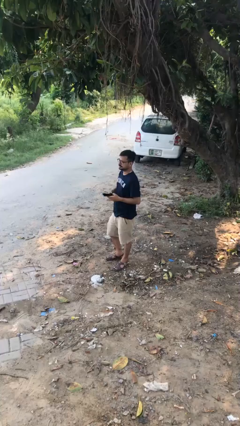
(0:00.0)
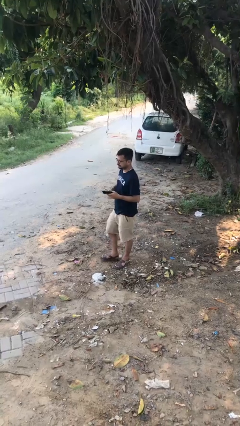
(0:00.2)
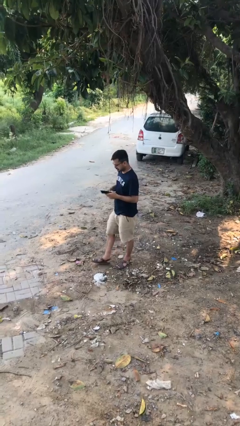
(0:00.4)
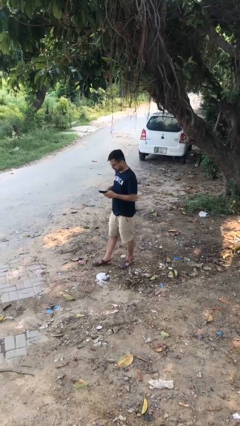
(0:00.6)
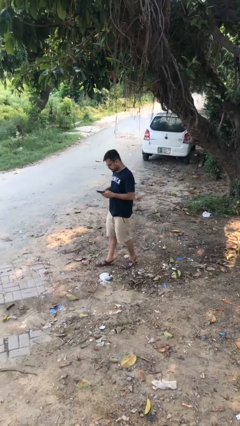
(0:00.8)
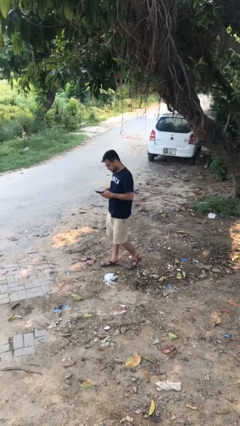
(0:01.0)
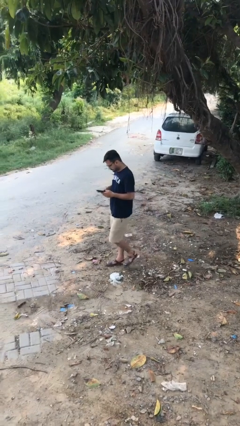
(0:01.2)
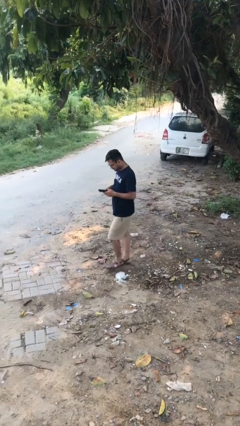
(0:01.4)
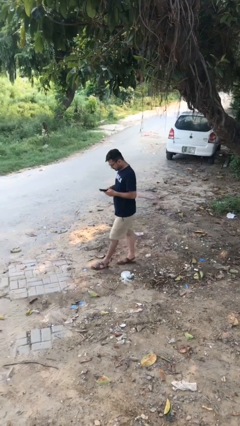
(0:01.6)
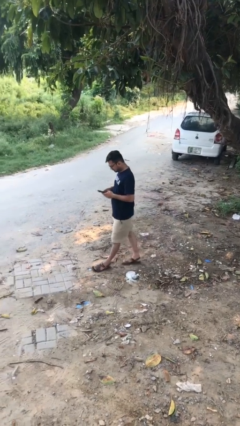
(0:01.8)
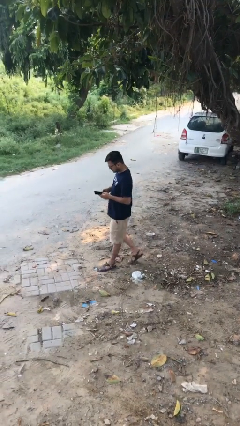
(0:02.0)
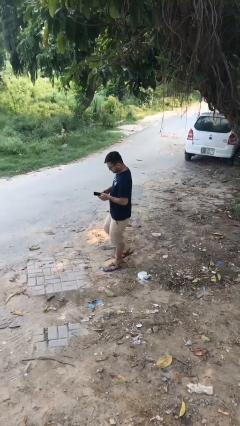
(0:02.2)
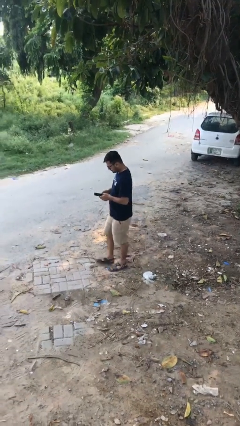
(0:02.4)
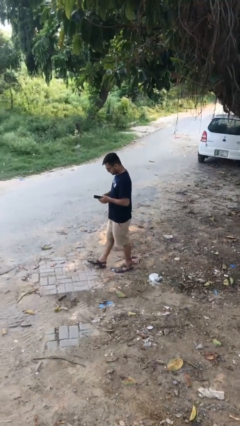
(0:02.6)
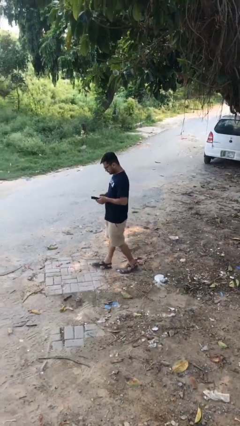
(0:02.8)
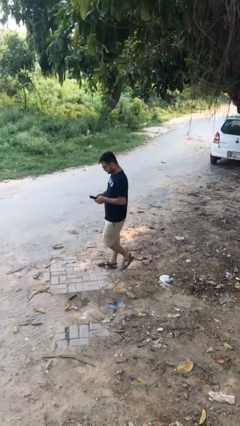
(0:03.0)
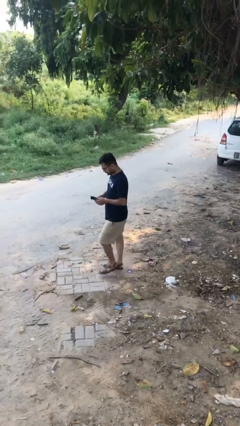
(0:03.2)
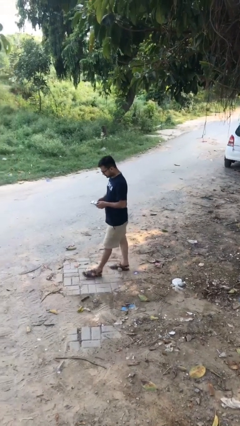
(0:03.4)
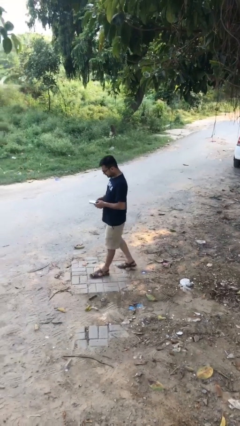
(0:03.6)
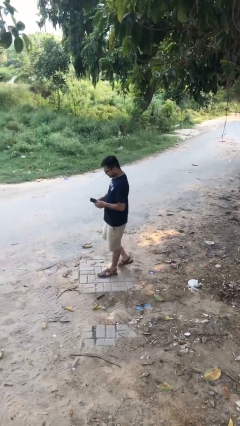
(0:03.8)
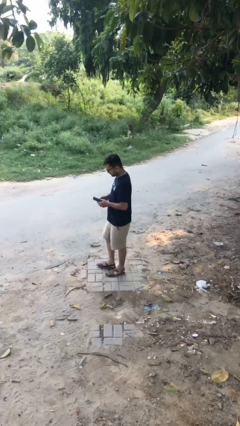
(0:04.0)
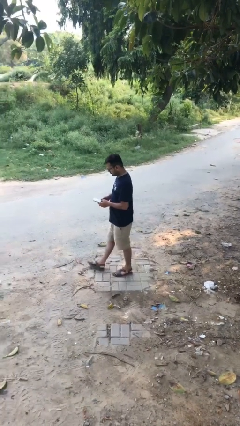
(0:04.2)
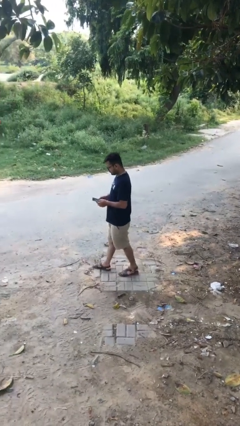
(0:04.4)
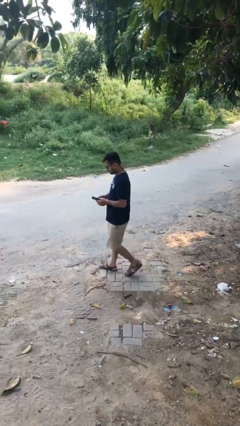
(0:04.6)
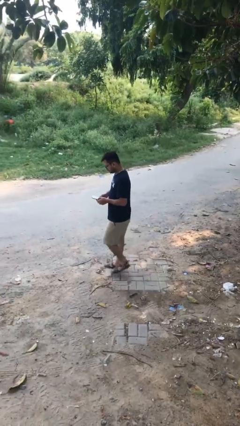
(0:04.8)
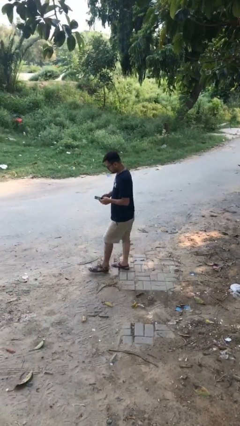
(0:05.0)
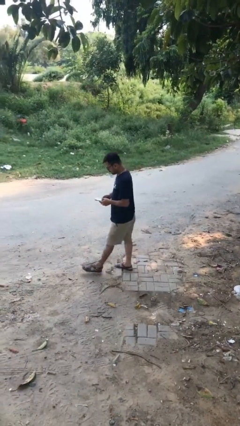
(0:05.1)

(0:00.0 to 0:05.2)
person texts on phone

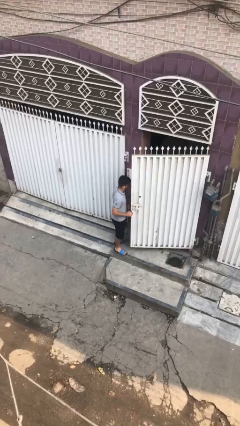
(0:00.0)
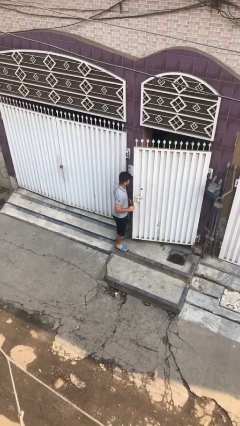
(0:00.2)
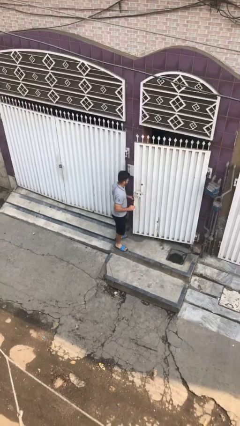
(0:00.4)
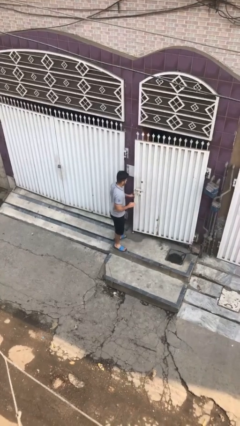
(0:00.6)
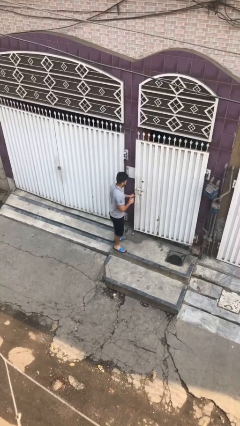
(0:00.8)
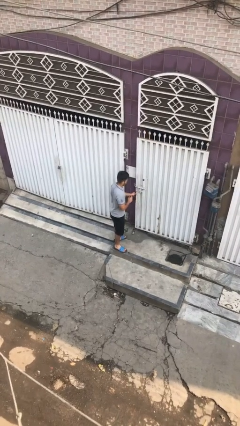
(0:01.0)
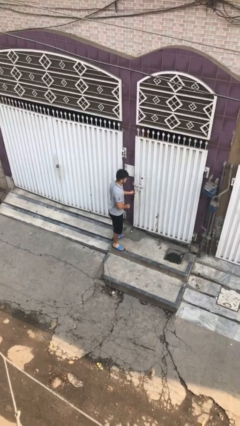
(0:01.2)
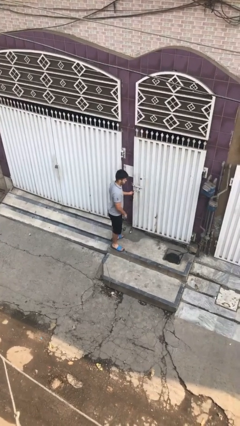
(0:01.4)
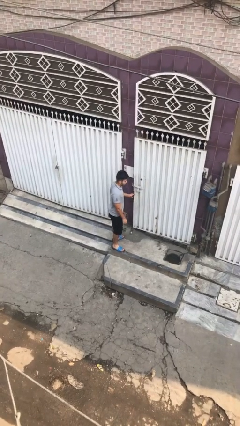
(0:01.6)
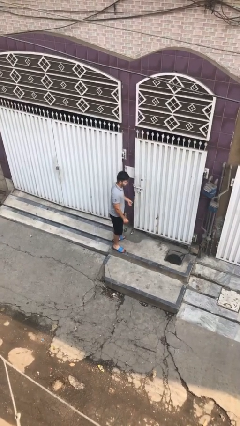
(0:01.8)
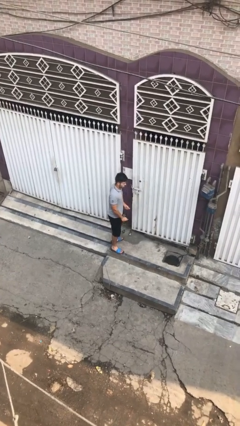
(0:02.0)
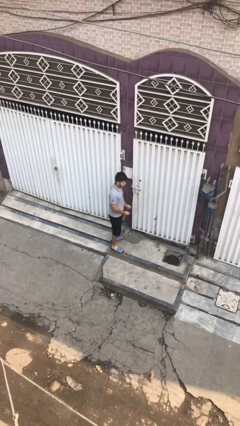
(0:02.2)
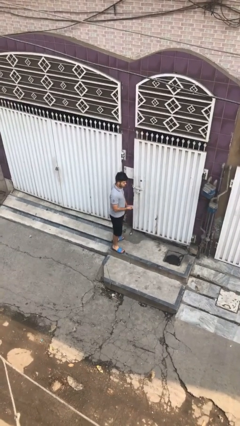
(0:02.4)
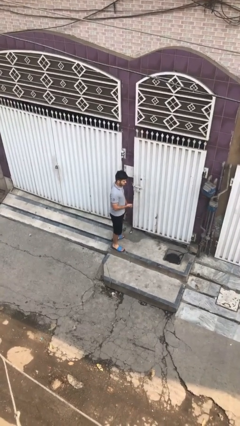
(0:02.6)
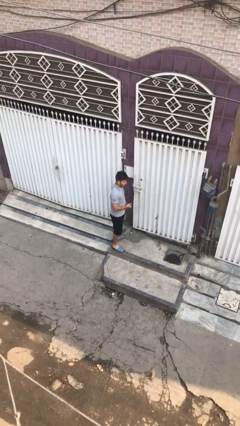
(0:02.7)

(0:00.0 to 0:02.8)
person closes facility door

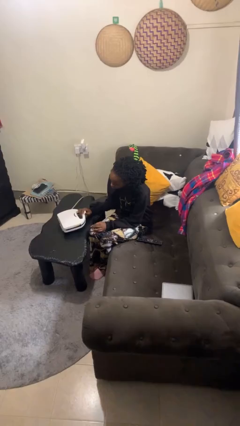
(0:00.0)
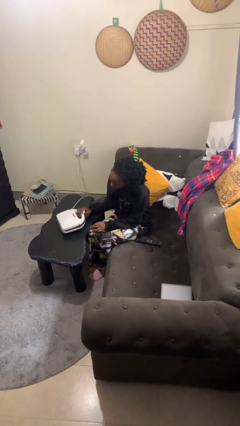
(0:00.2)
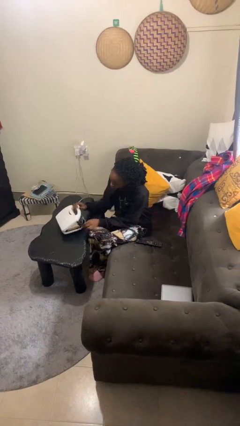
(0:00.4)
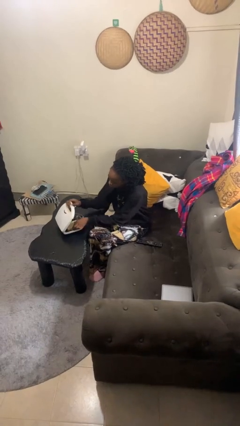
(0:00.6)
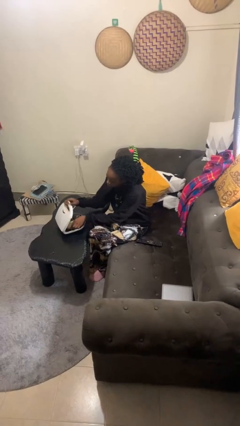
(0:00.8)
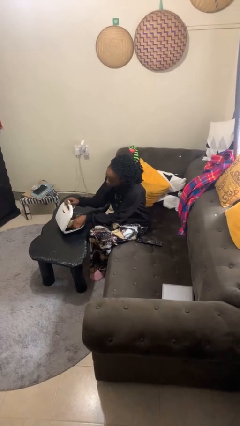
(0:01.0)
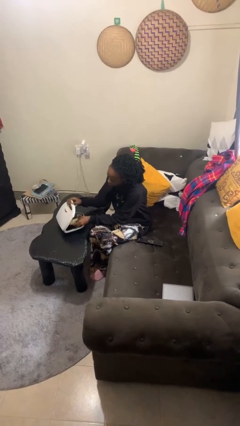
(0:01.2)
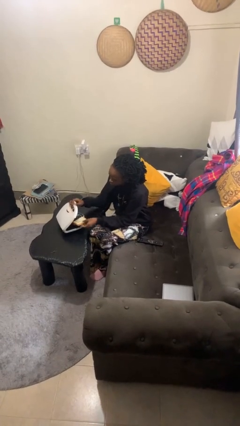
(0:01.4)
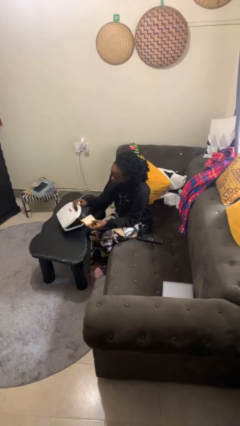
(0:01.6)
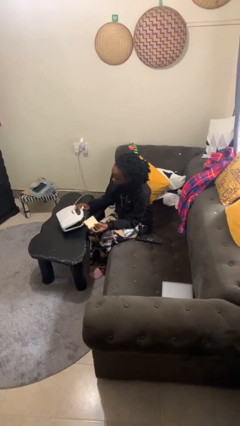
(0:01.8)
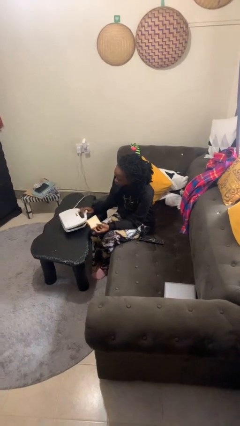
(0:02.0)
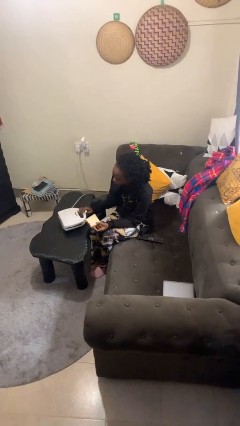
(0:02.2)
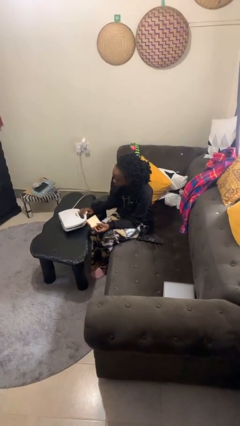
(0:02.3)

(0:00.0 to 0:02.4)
person takes object from toaster

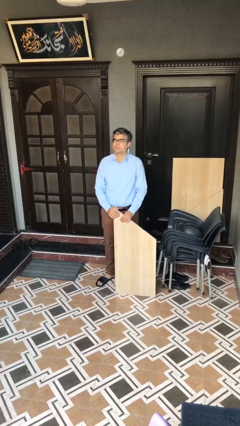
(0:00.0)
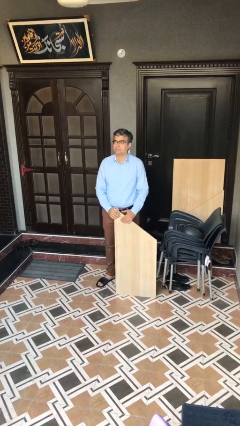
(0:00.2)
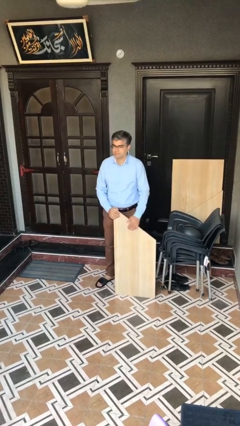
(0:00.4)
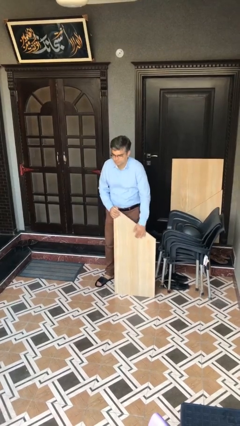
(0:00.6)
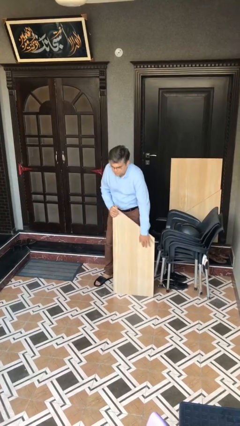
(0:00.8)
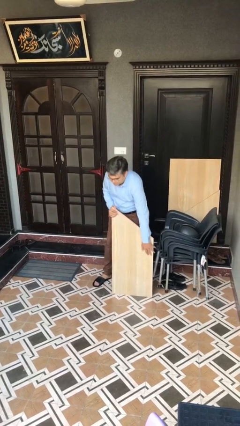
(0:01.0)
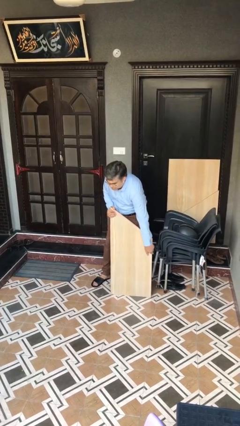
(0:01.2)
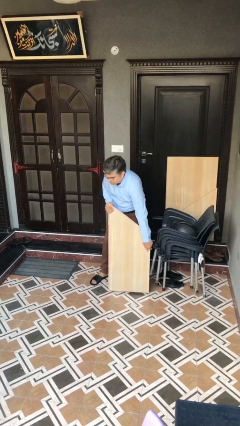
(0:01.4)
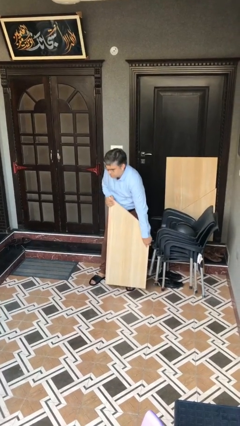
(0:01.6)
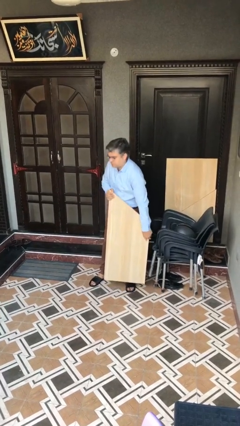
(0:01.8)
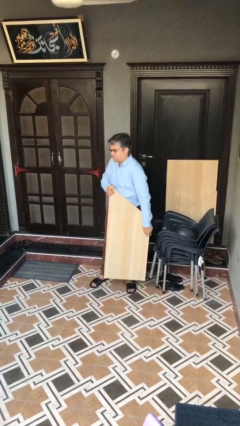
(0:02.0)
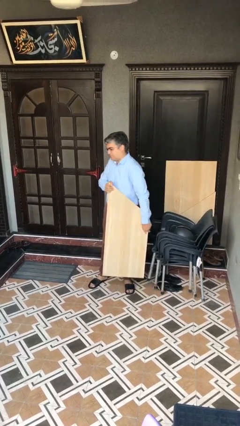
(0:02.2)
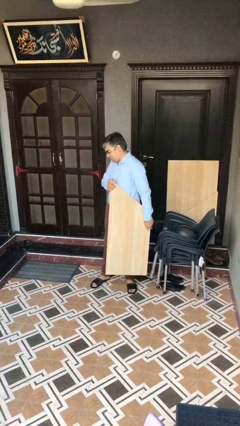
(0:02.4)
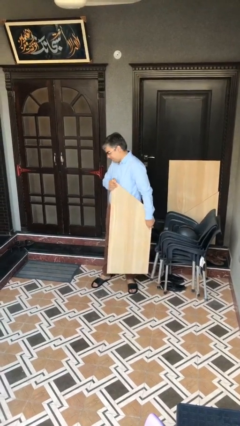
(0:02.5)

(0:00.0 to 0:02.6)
person picks up object from floor

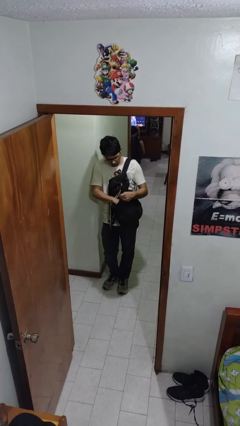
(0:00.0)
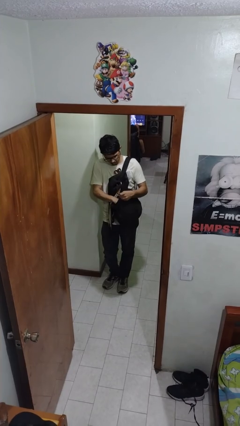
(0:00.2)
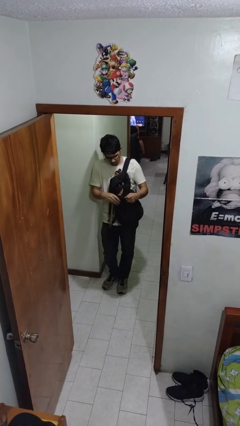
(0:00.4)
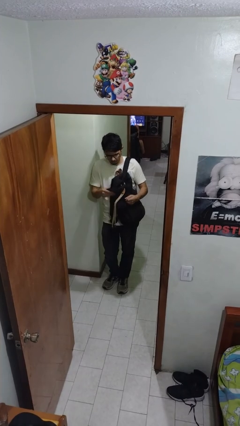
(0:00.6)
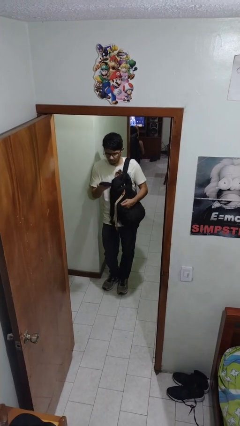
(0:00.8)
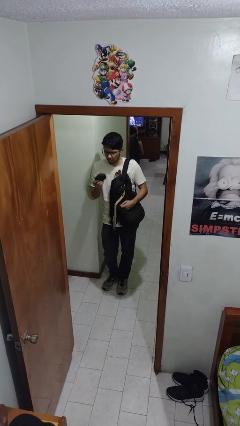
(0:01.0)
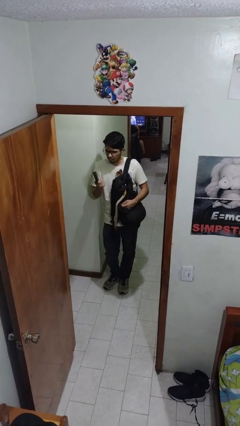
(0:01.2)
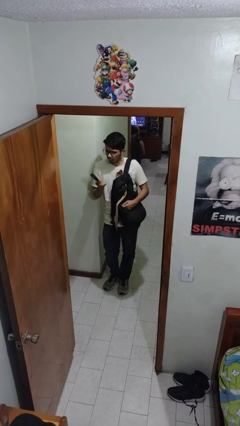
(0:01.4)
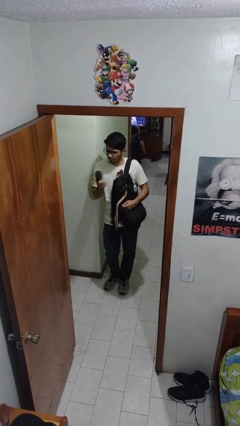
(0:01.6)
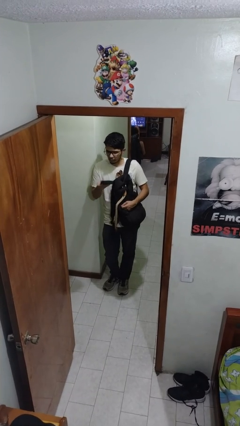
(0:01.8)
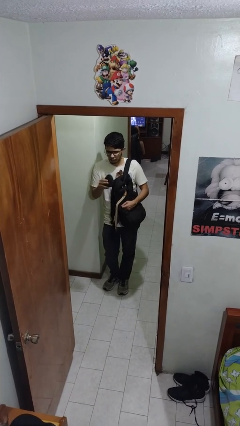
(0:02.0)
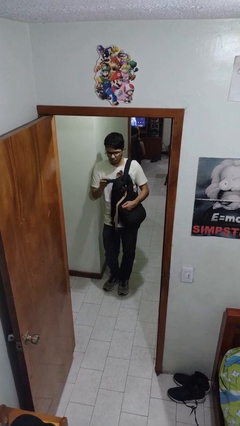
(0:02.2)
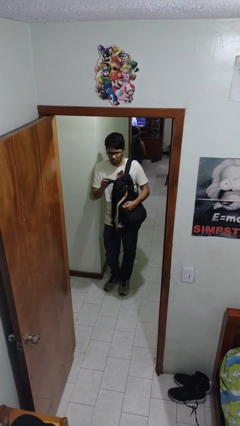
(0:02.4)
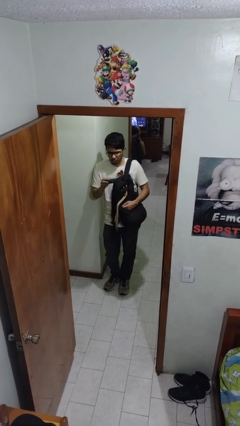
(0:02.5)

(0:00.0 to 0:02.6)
person takes object from backpack

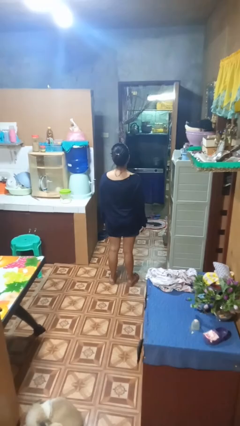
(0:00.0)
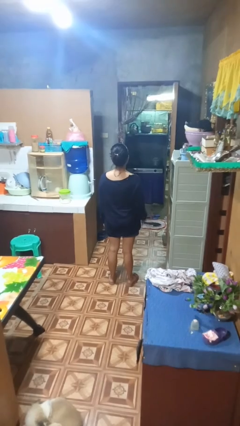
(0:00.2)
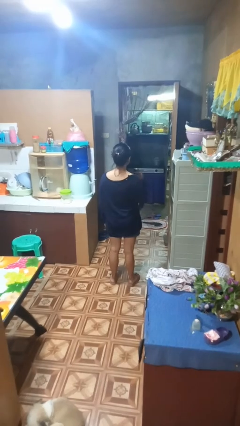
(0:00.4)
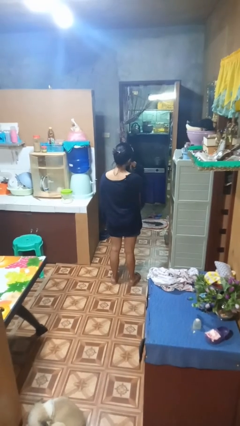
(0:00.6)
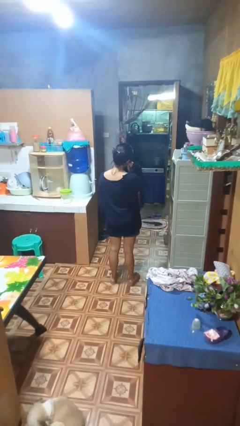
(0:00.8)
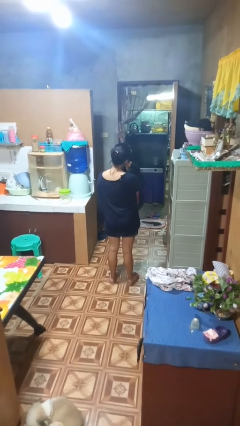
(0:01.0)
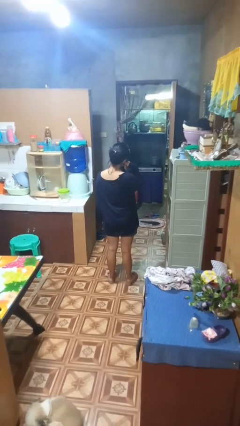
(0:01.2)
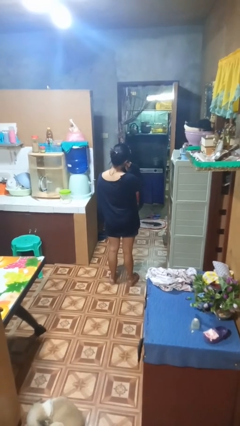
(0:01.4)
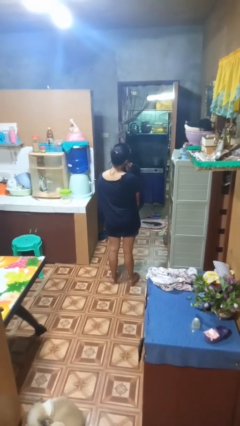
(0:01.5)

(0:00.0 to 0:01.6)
person gestures call me

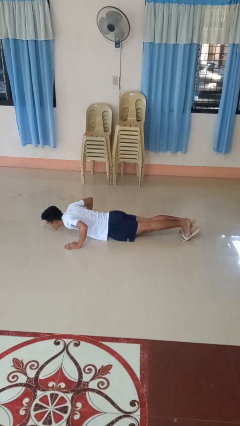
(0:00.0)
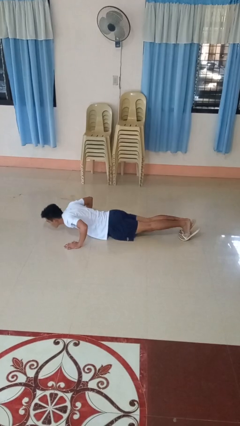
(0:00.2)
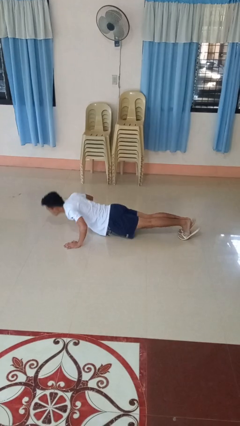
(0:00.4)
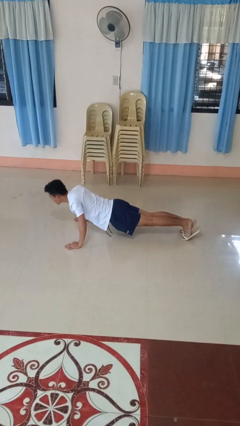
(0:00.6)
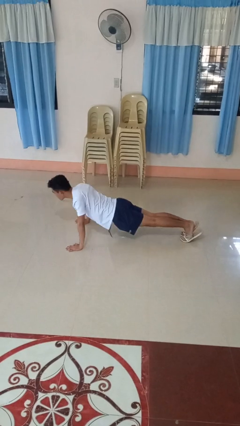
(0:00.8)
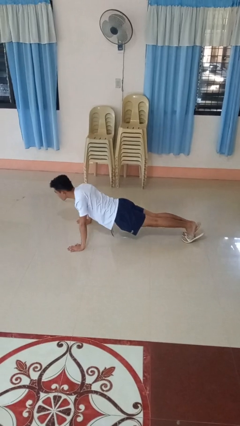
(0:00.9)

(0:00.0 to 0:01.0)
person exercises with pushup